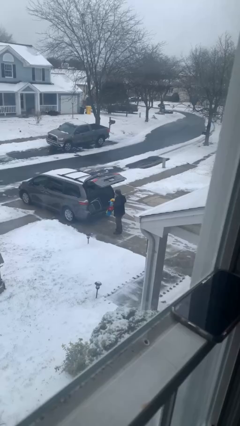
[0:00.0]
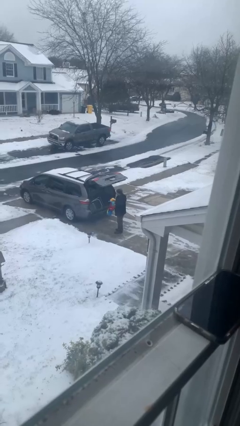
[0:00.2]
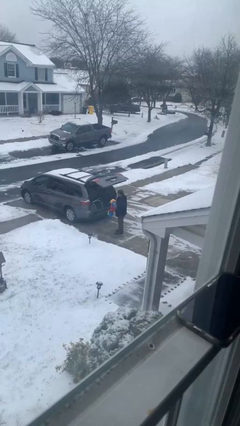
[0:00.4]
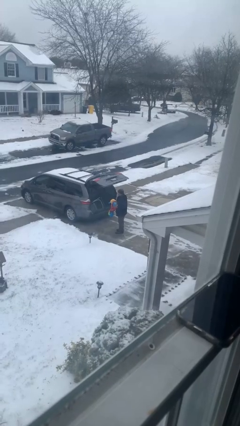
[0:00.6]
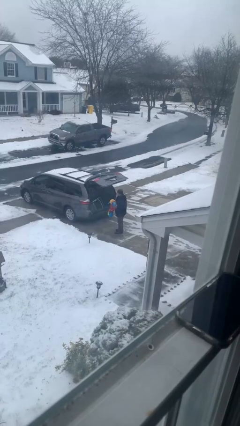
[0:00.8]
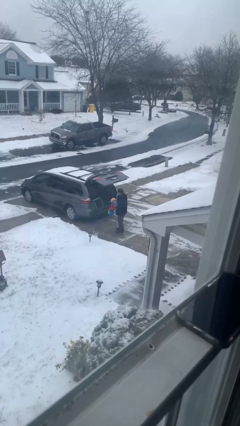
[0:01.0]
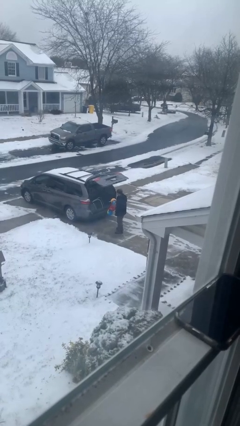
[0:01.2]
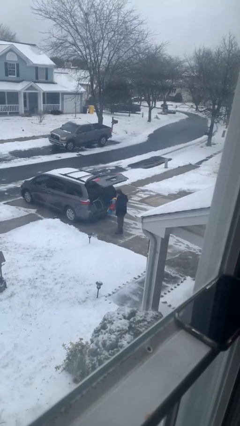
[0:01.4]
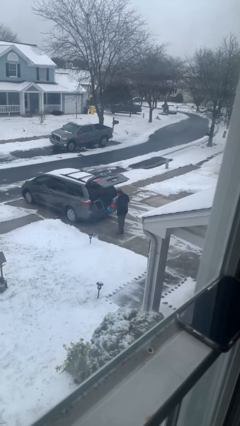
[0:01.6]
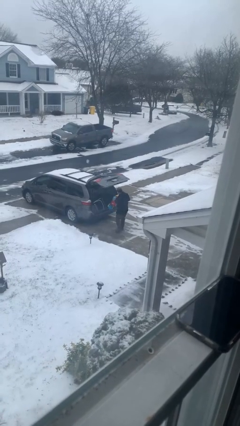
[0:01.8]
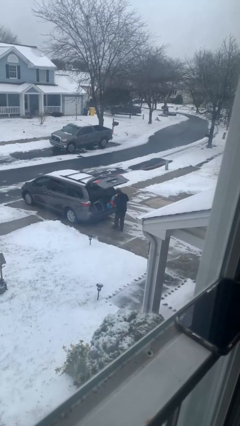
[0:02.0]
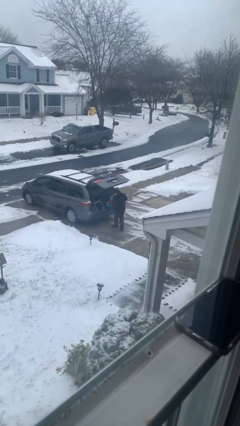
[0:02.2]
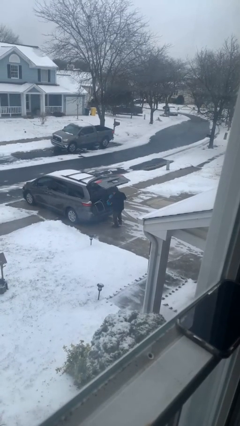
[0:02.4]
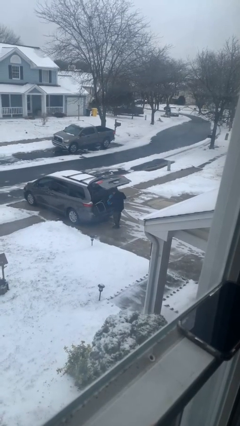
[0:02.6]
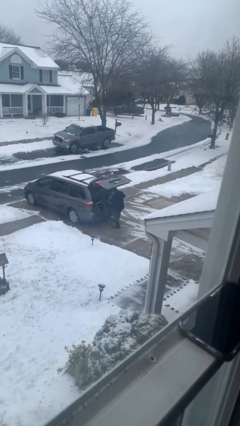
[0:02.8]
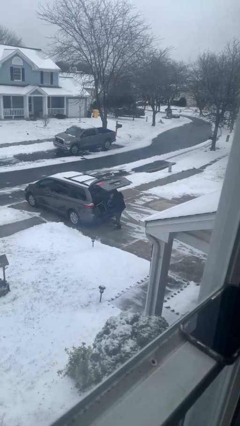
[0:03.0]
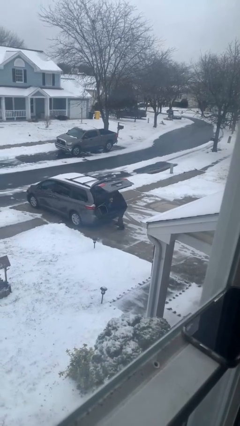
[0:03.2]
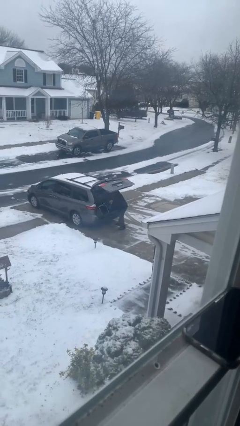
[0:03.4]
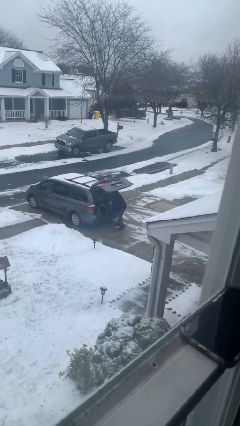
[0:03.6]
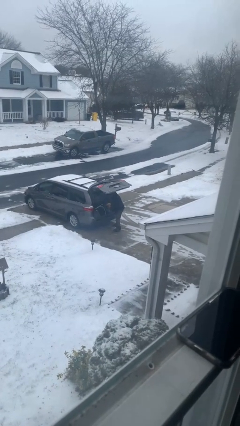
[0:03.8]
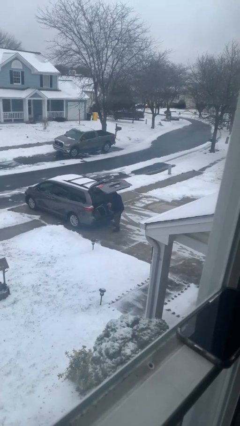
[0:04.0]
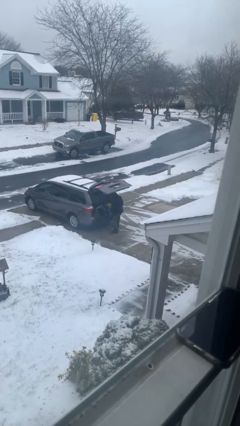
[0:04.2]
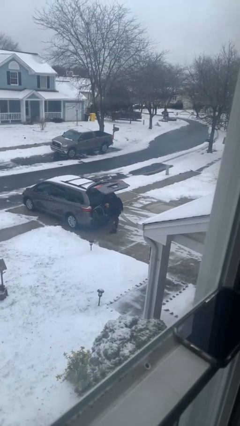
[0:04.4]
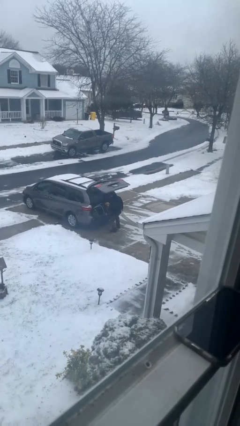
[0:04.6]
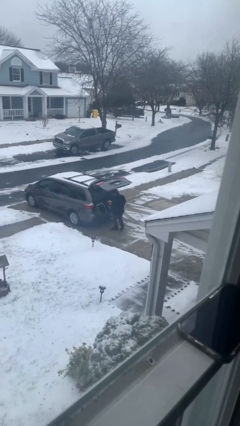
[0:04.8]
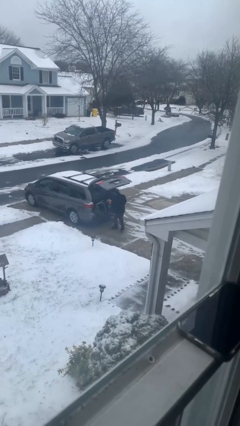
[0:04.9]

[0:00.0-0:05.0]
person loads car

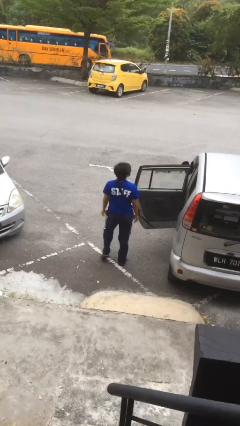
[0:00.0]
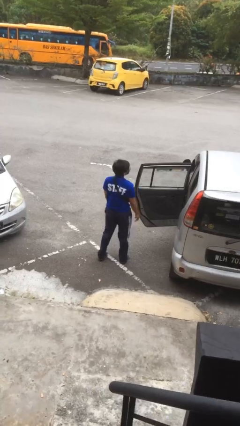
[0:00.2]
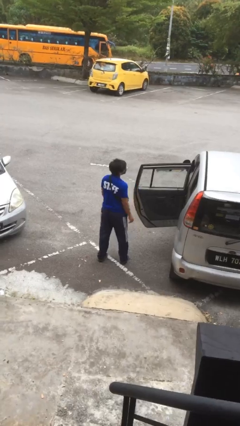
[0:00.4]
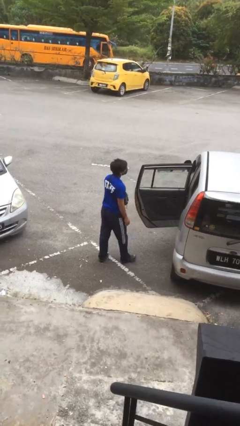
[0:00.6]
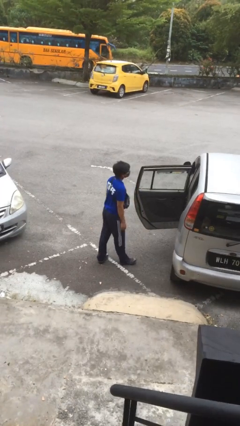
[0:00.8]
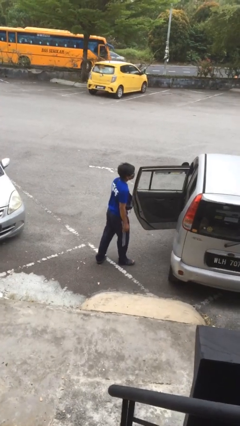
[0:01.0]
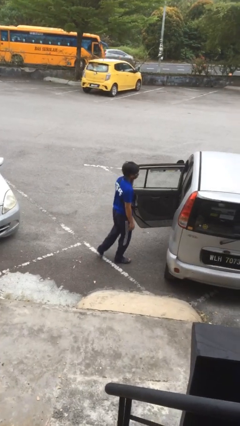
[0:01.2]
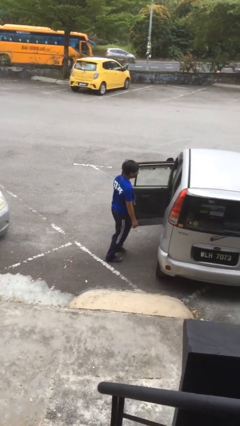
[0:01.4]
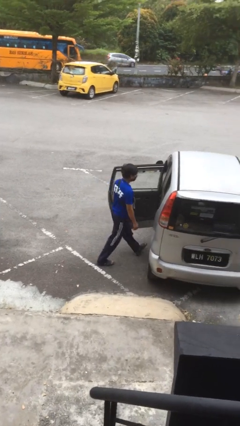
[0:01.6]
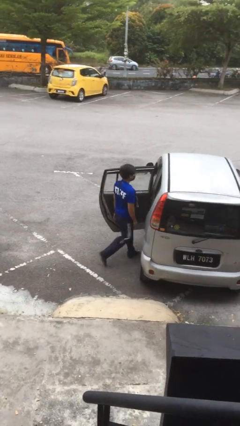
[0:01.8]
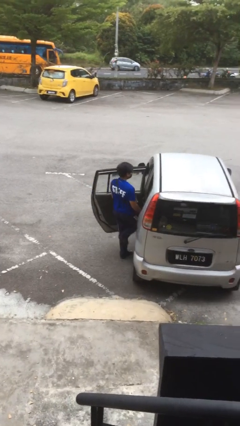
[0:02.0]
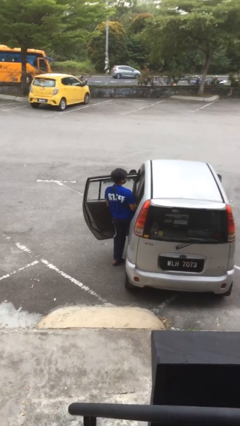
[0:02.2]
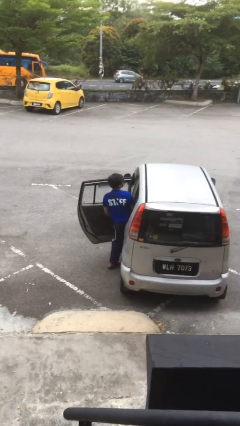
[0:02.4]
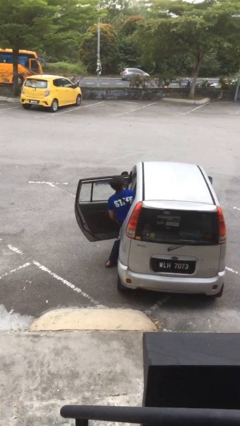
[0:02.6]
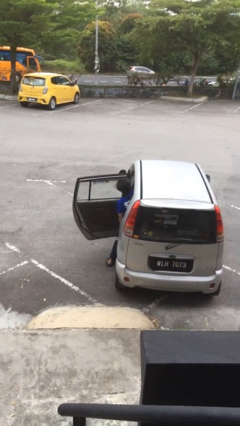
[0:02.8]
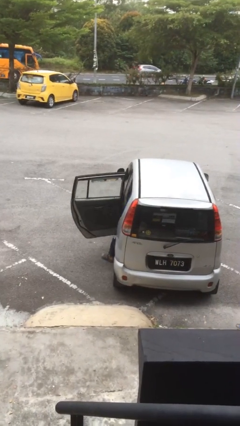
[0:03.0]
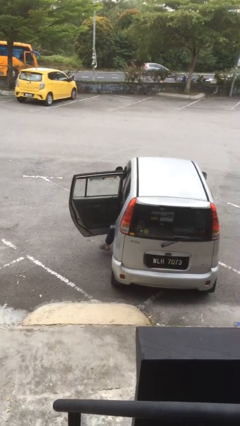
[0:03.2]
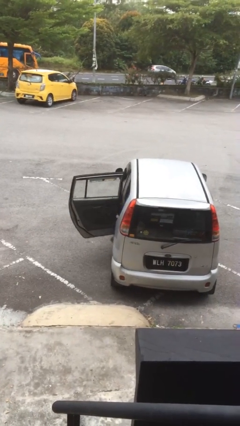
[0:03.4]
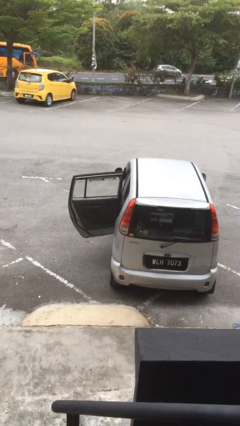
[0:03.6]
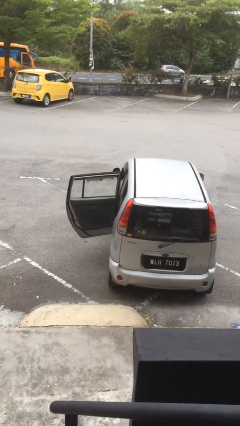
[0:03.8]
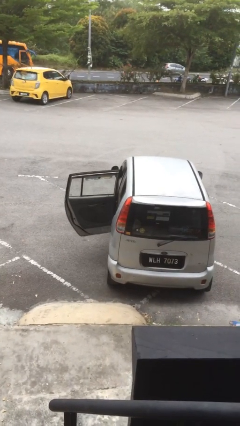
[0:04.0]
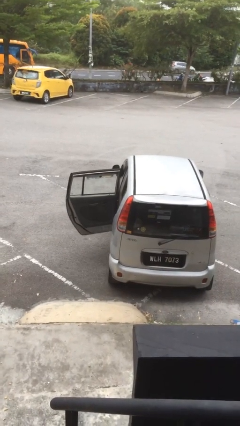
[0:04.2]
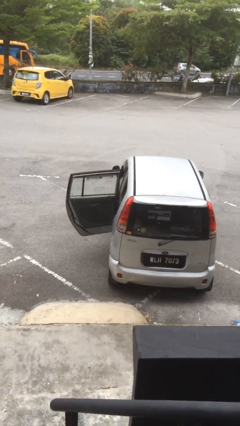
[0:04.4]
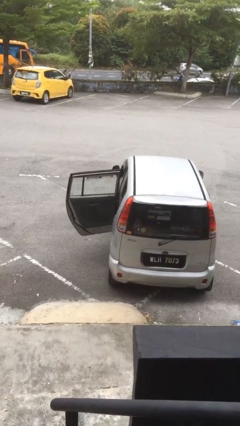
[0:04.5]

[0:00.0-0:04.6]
person enters car

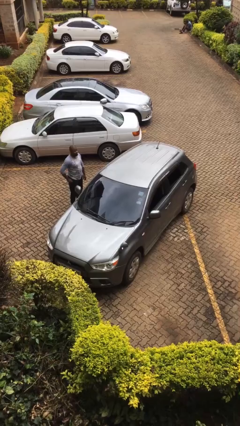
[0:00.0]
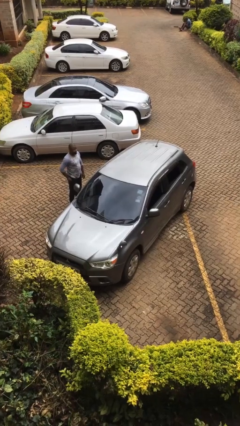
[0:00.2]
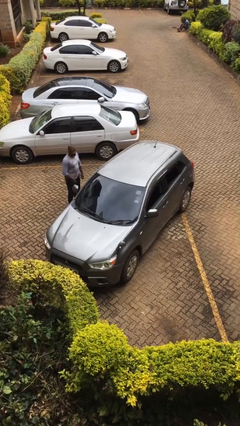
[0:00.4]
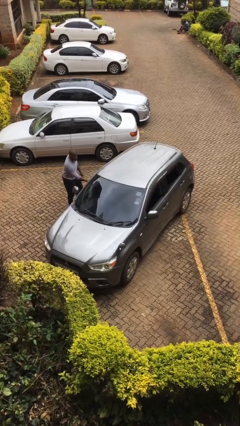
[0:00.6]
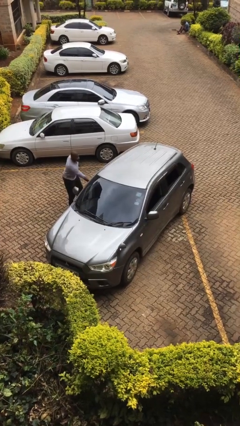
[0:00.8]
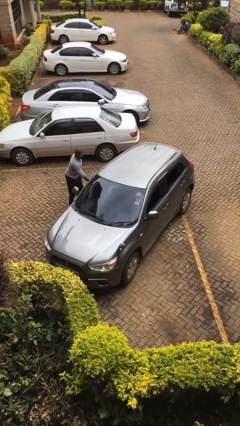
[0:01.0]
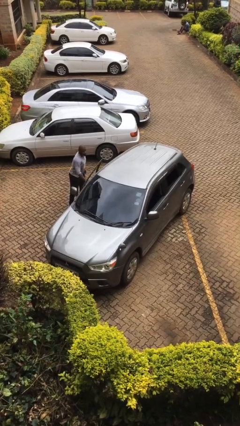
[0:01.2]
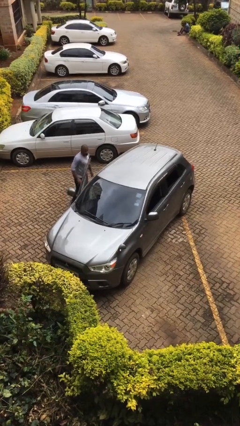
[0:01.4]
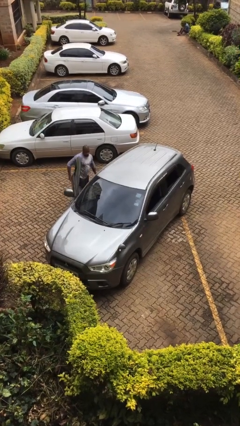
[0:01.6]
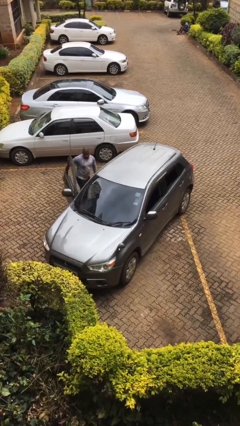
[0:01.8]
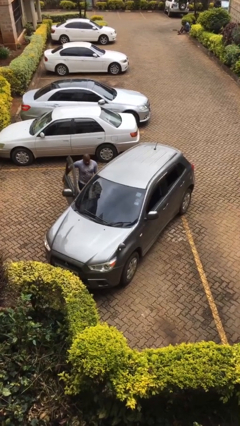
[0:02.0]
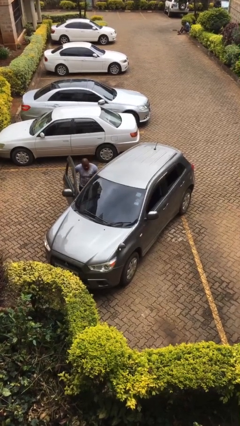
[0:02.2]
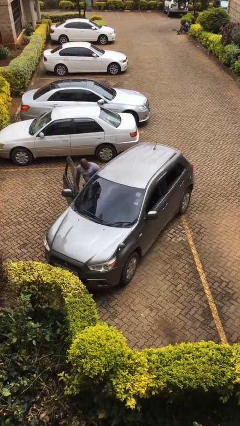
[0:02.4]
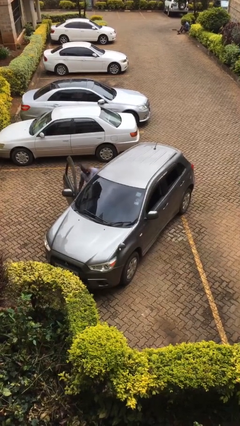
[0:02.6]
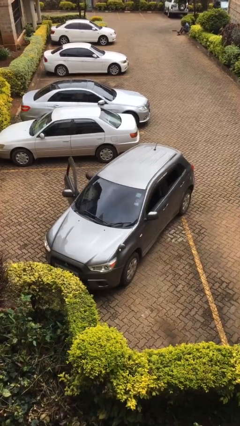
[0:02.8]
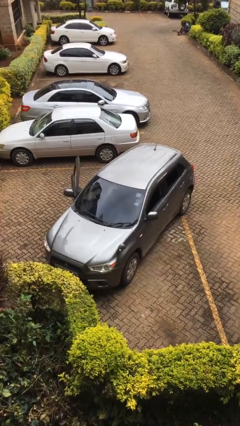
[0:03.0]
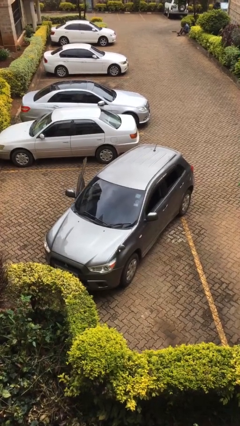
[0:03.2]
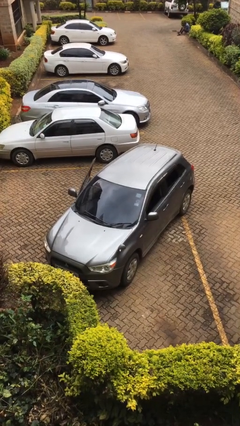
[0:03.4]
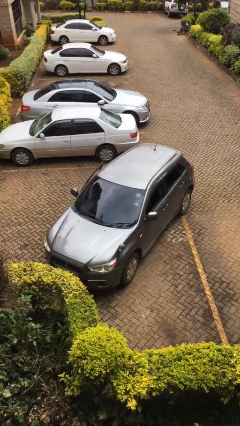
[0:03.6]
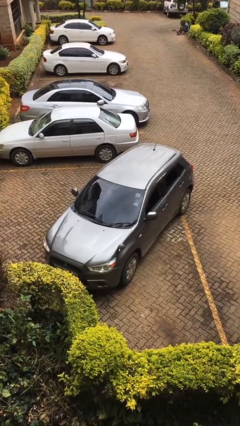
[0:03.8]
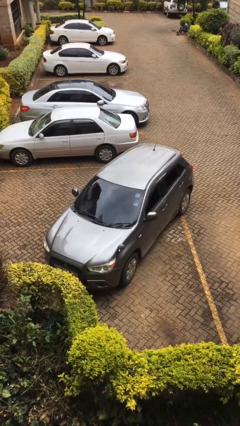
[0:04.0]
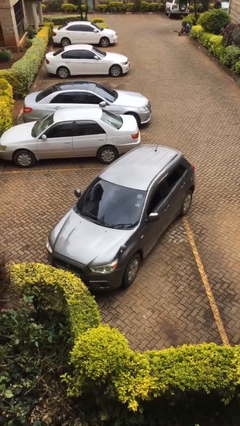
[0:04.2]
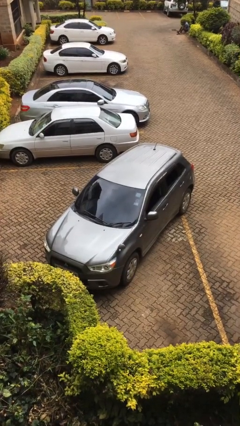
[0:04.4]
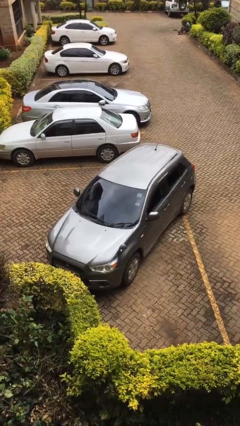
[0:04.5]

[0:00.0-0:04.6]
car picks up person

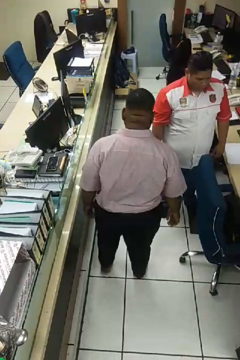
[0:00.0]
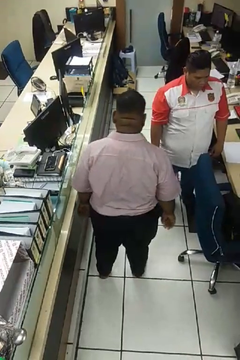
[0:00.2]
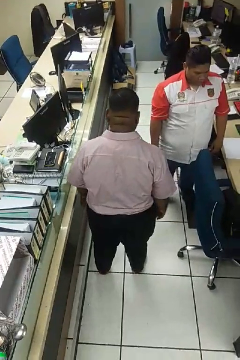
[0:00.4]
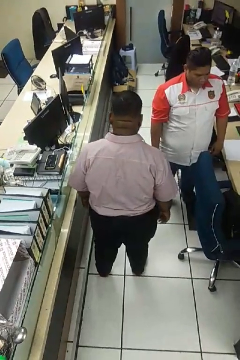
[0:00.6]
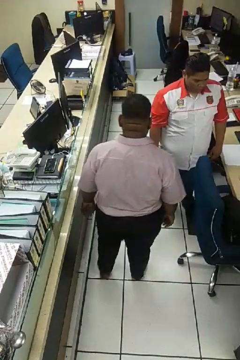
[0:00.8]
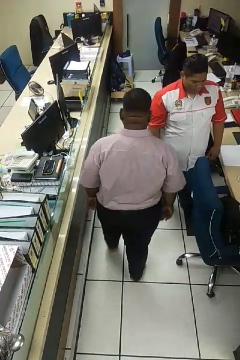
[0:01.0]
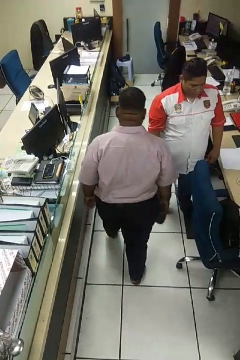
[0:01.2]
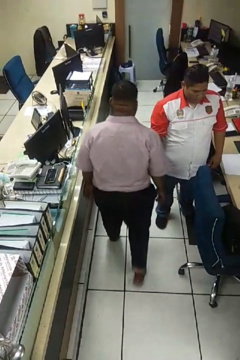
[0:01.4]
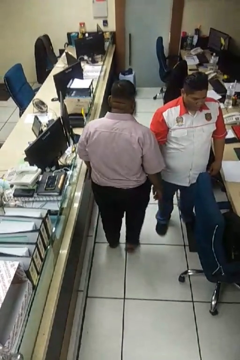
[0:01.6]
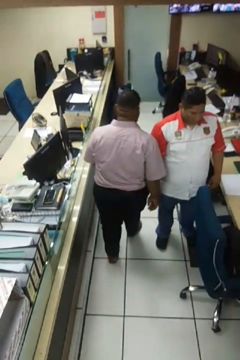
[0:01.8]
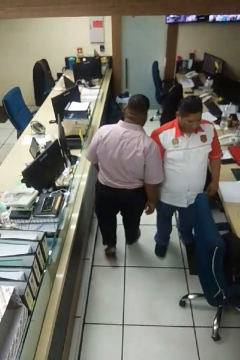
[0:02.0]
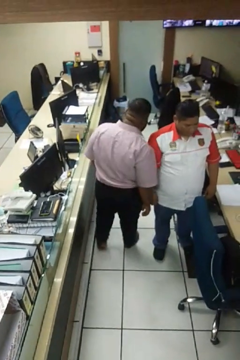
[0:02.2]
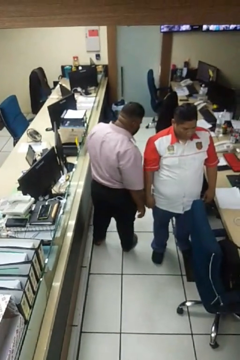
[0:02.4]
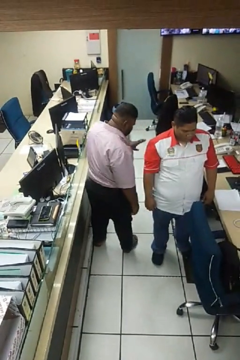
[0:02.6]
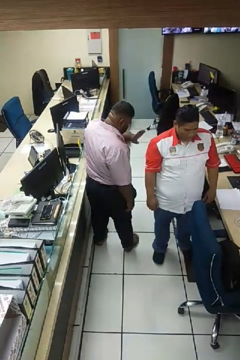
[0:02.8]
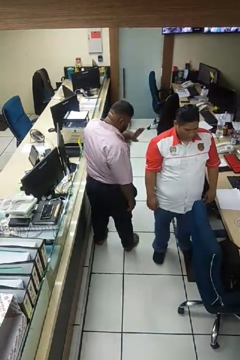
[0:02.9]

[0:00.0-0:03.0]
person bumps into person

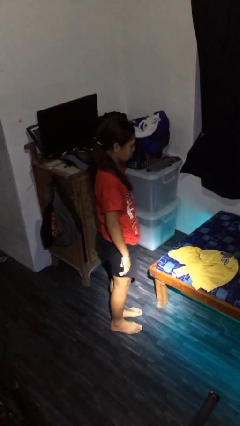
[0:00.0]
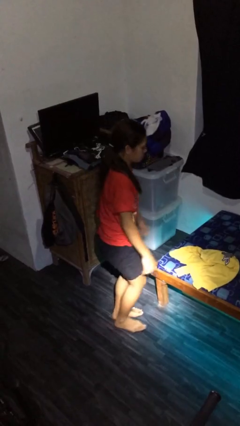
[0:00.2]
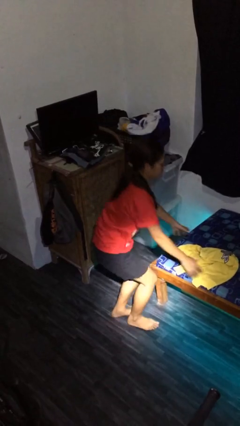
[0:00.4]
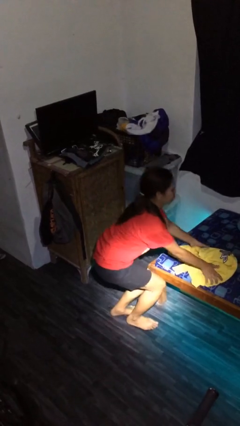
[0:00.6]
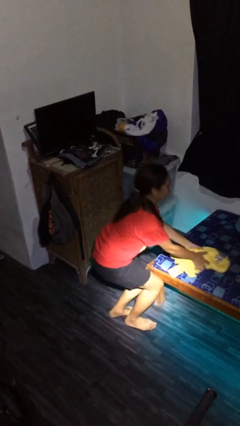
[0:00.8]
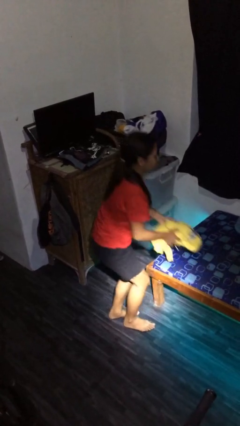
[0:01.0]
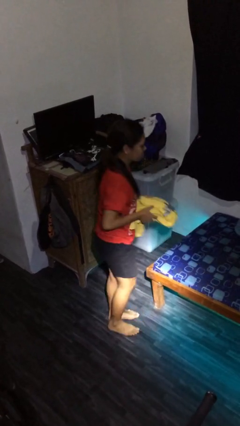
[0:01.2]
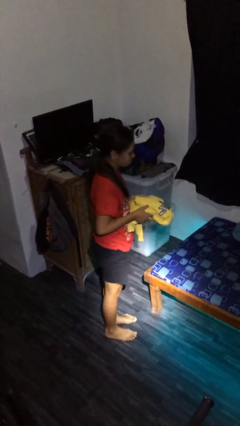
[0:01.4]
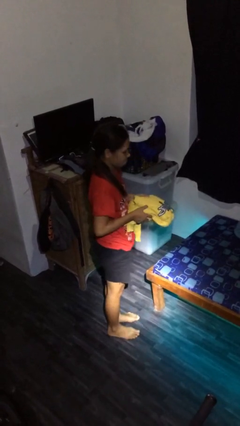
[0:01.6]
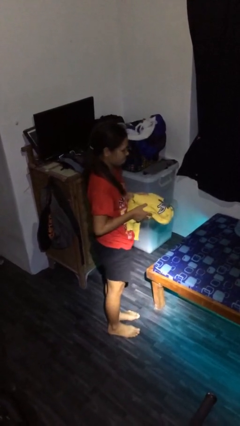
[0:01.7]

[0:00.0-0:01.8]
person picks up object from bed
